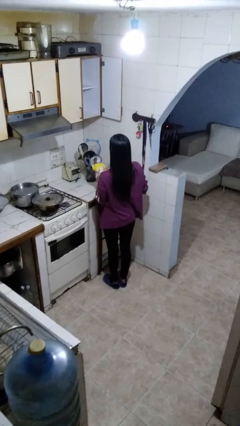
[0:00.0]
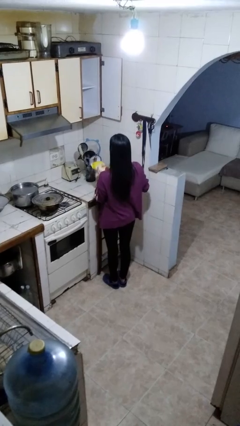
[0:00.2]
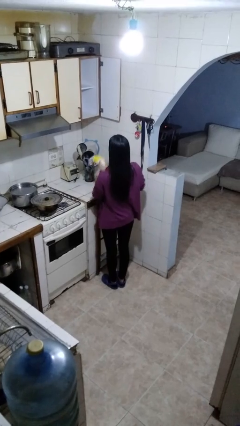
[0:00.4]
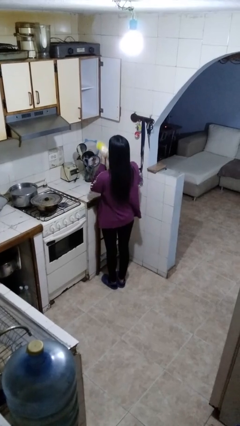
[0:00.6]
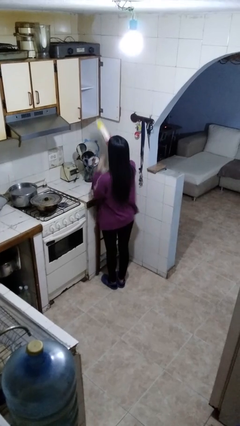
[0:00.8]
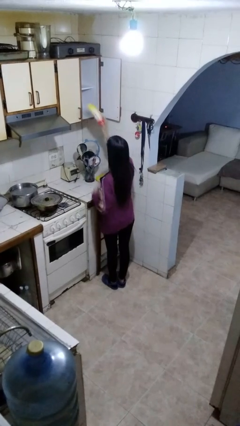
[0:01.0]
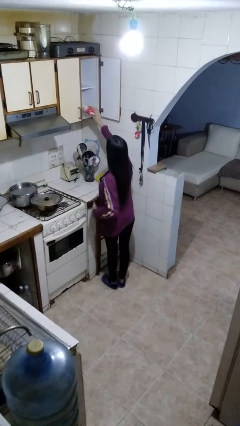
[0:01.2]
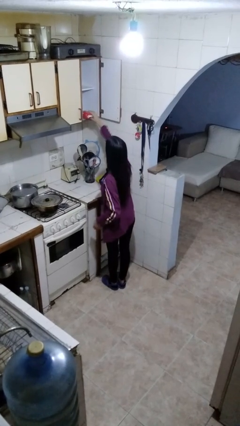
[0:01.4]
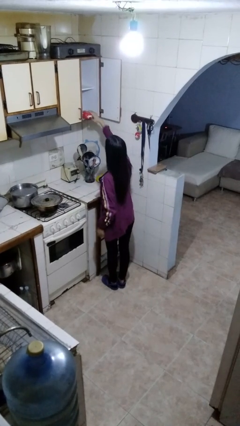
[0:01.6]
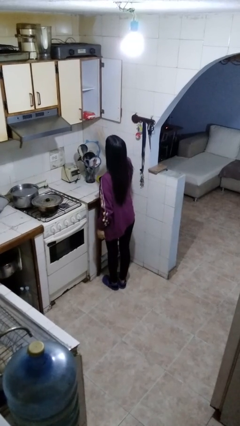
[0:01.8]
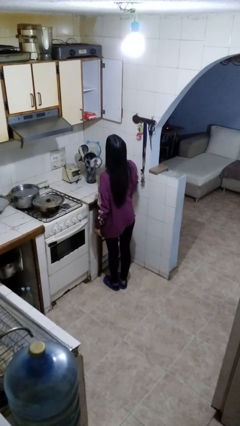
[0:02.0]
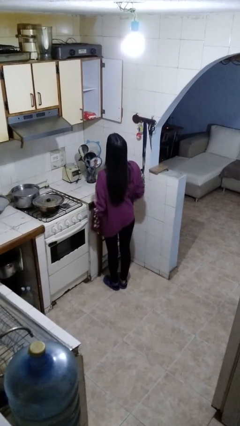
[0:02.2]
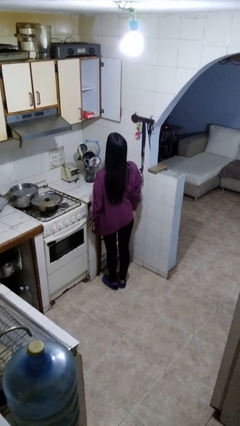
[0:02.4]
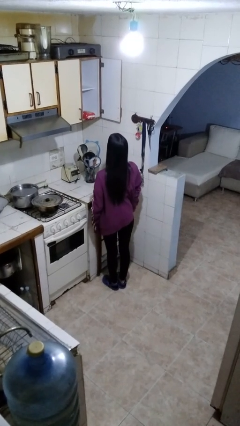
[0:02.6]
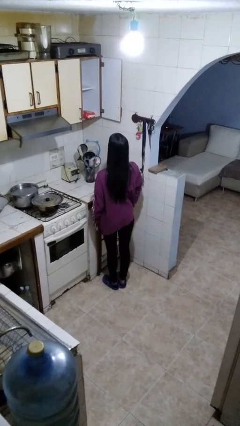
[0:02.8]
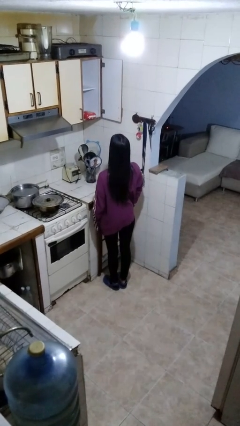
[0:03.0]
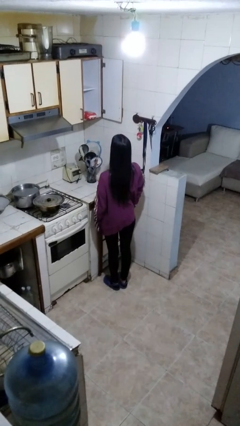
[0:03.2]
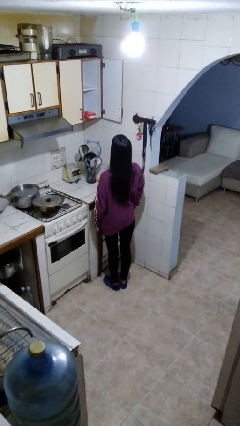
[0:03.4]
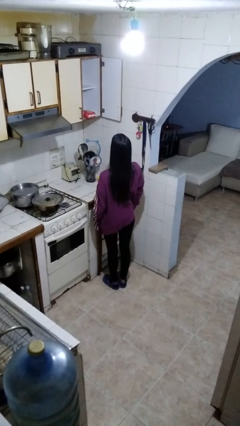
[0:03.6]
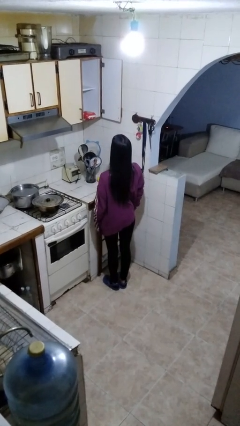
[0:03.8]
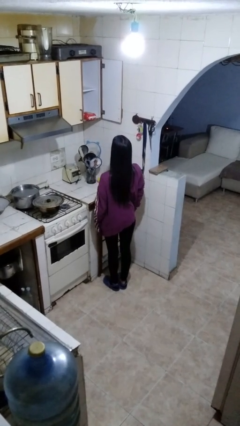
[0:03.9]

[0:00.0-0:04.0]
person picks up object from cabinet

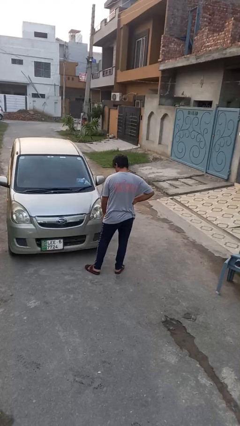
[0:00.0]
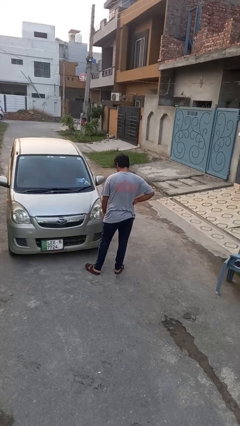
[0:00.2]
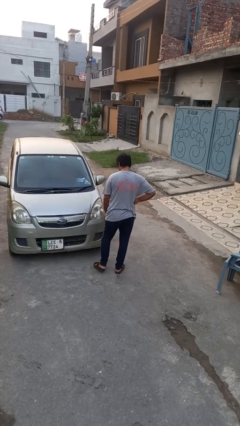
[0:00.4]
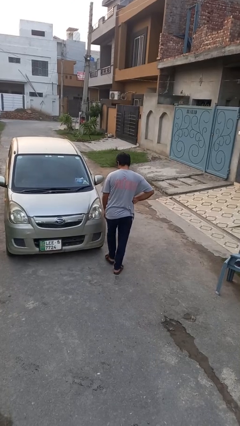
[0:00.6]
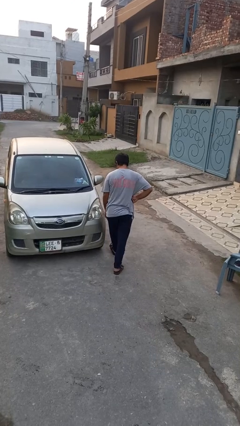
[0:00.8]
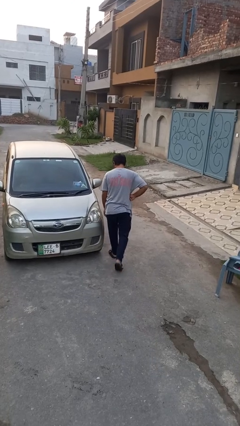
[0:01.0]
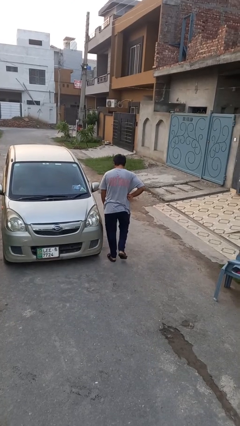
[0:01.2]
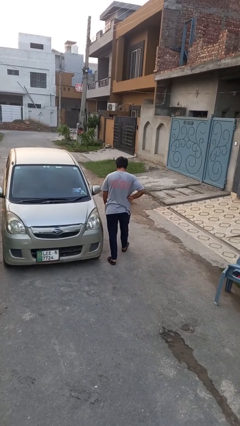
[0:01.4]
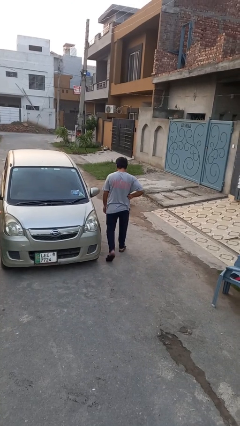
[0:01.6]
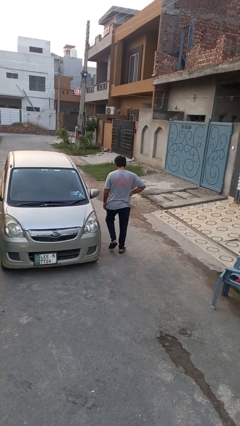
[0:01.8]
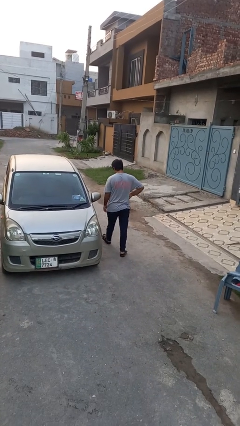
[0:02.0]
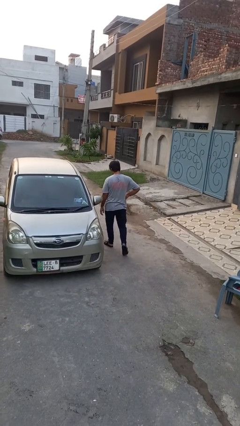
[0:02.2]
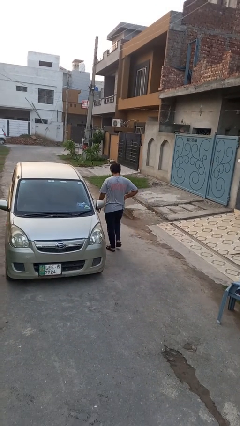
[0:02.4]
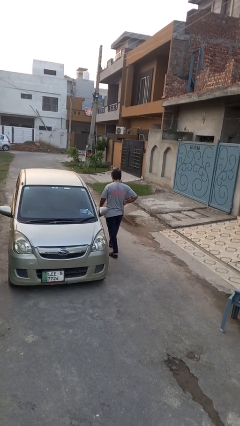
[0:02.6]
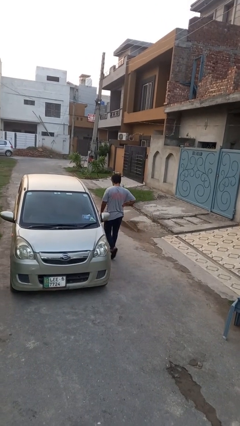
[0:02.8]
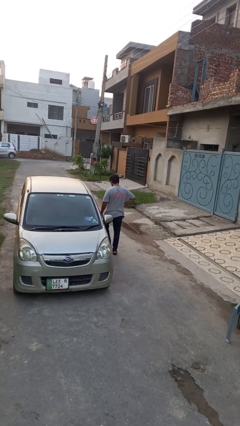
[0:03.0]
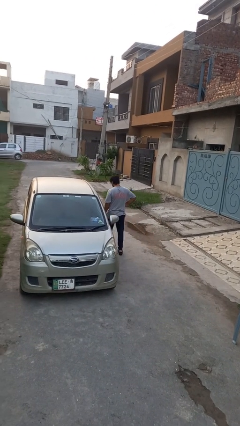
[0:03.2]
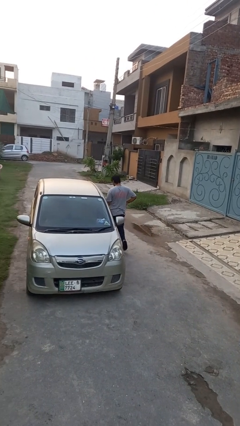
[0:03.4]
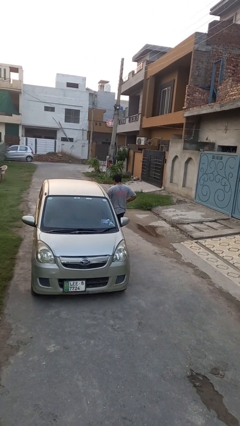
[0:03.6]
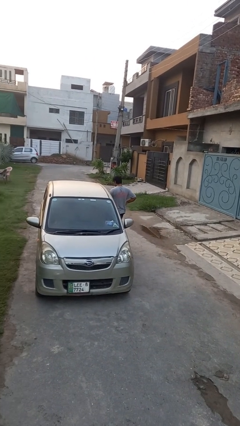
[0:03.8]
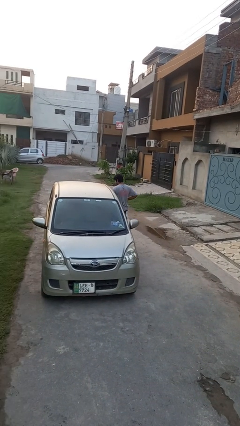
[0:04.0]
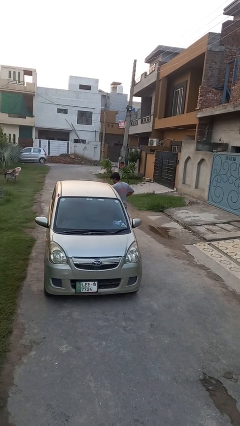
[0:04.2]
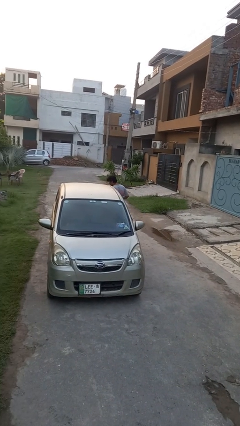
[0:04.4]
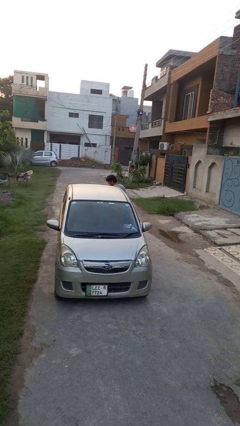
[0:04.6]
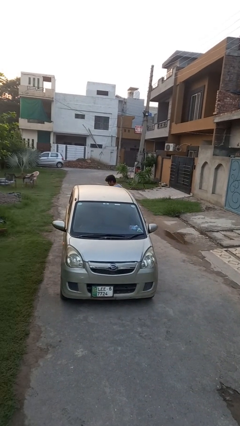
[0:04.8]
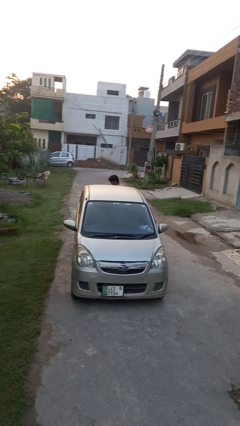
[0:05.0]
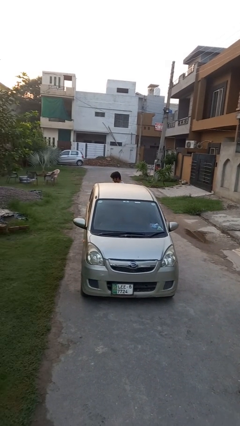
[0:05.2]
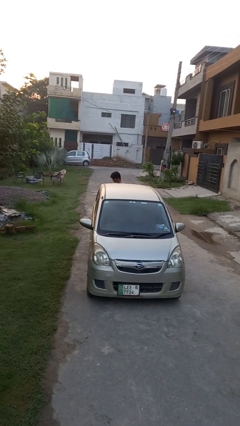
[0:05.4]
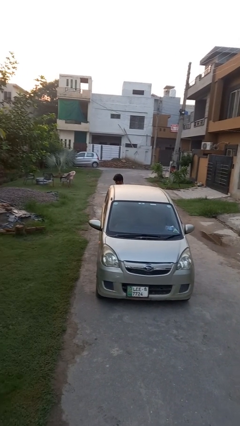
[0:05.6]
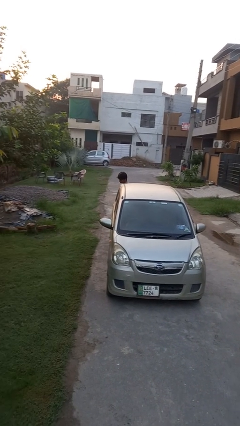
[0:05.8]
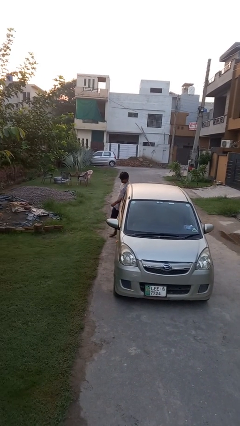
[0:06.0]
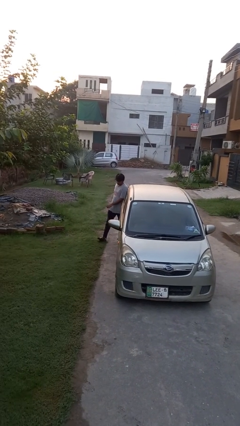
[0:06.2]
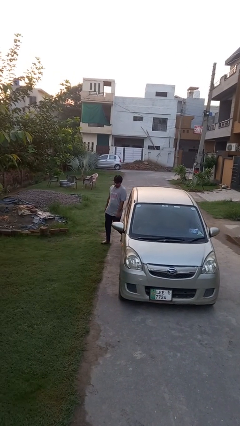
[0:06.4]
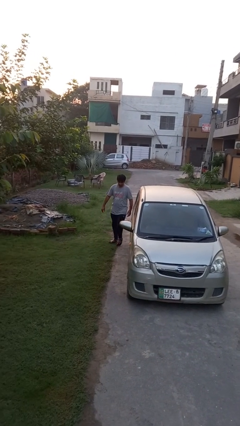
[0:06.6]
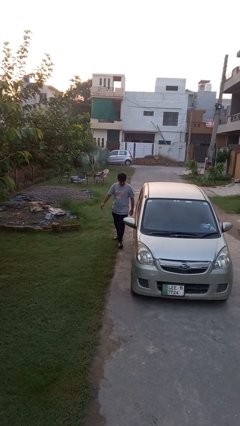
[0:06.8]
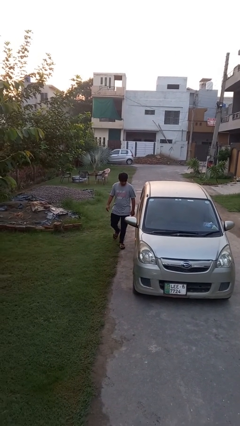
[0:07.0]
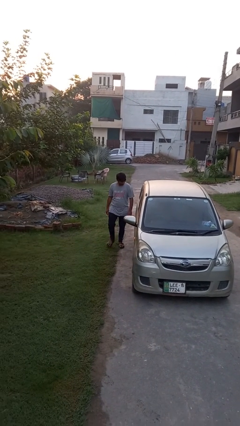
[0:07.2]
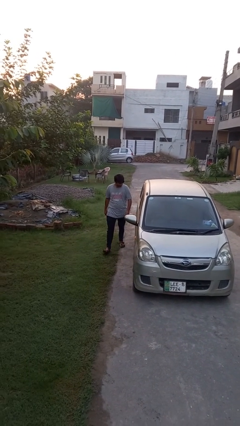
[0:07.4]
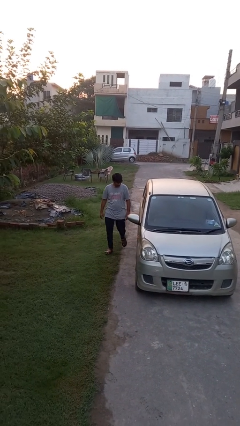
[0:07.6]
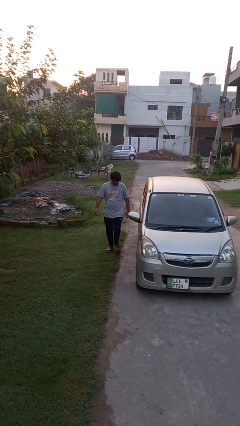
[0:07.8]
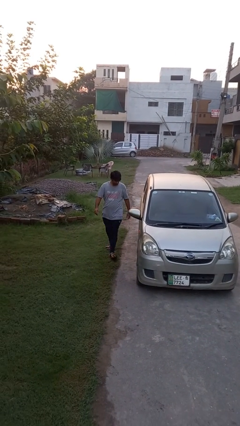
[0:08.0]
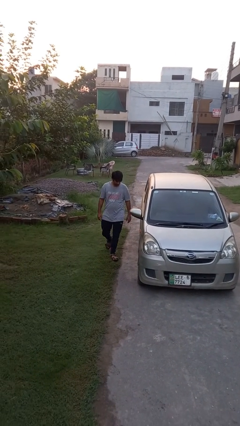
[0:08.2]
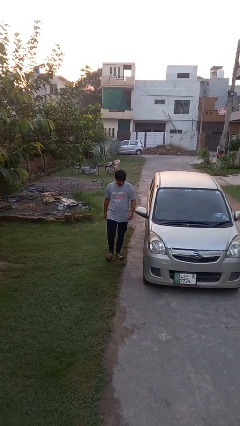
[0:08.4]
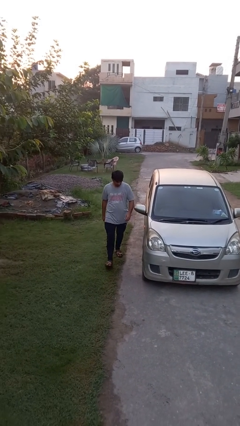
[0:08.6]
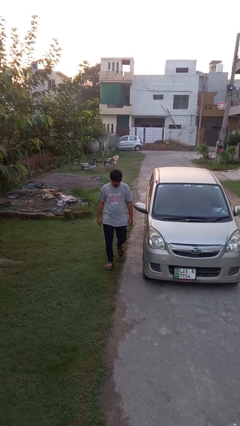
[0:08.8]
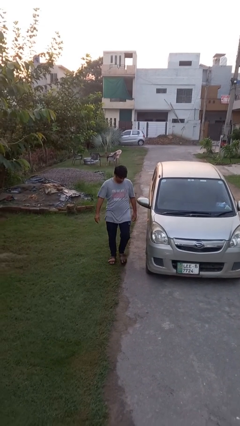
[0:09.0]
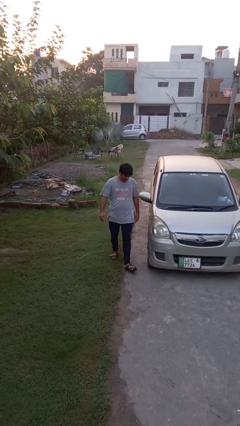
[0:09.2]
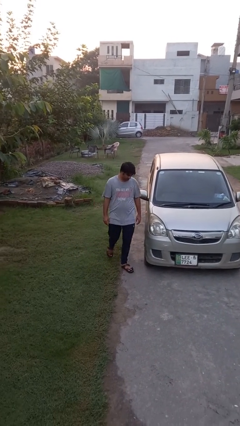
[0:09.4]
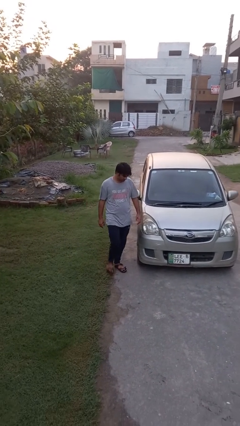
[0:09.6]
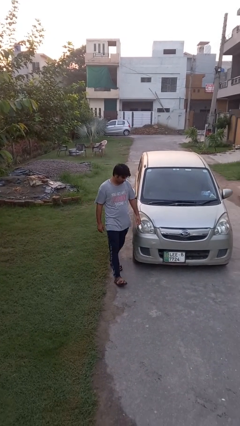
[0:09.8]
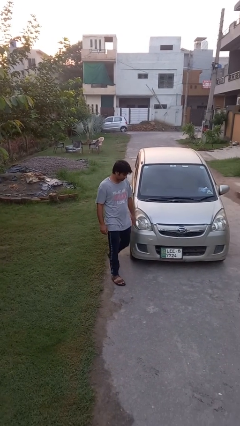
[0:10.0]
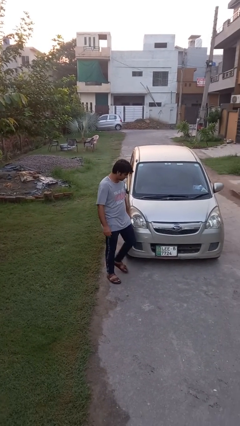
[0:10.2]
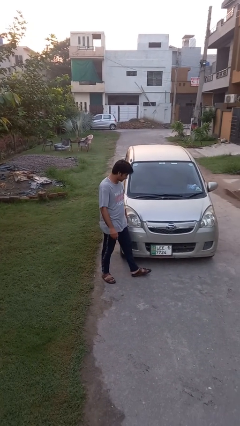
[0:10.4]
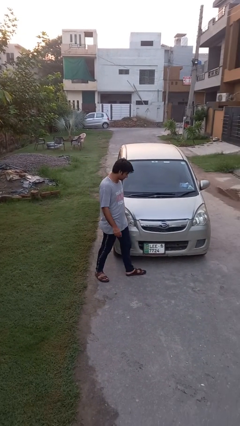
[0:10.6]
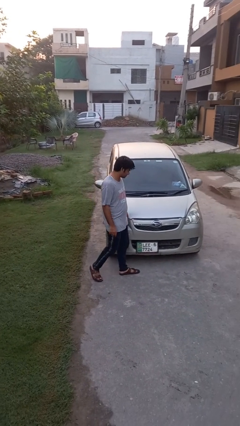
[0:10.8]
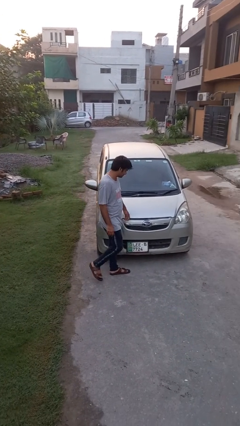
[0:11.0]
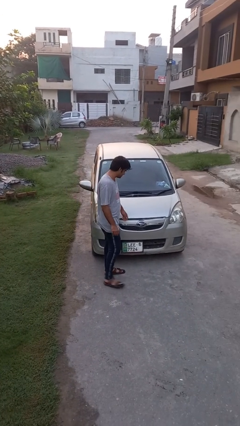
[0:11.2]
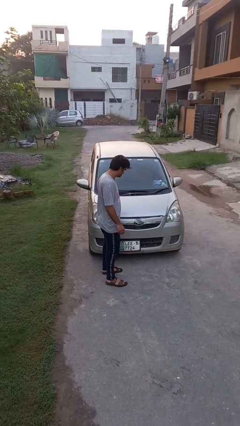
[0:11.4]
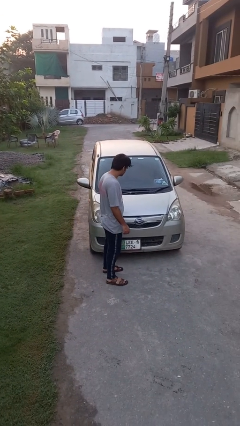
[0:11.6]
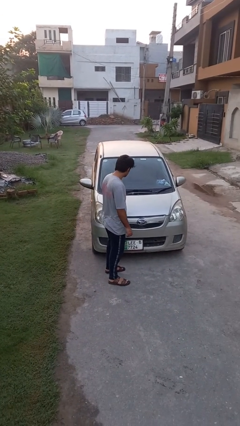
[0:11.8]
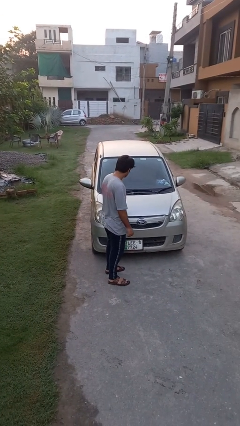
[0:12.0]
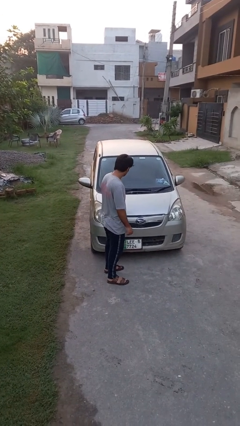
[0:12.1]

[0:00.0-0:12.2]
person walks around car

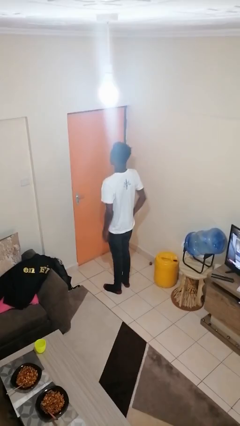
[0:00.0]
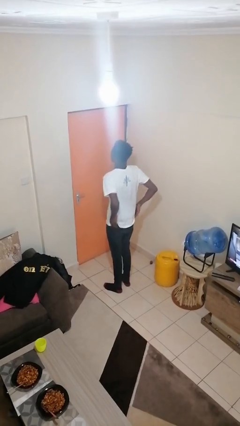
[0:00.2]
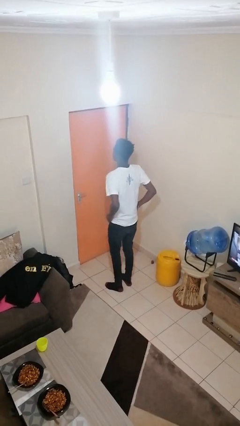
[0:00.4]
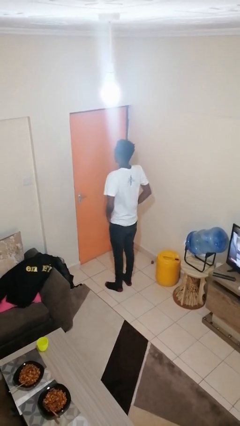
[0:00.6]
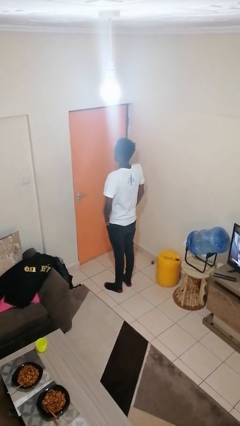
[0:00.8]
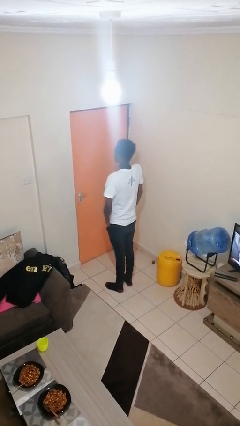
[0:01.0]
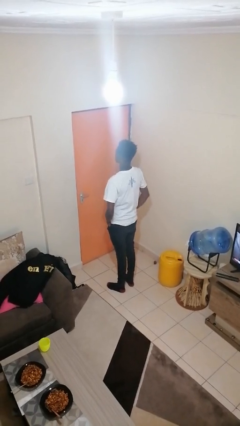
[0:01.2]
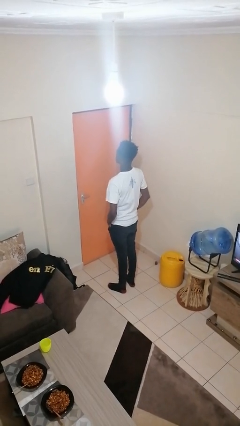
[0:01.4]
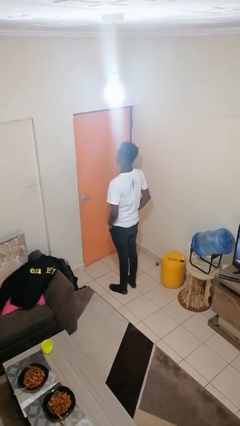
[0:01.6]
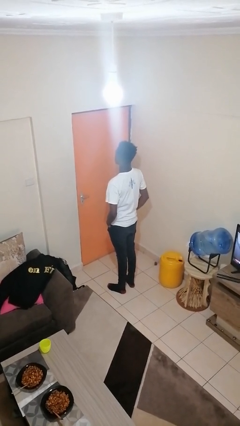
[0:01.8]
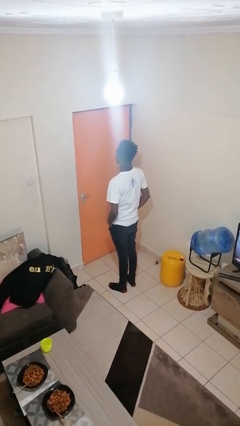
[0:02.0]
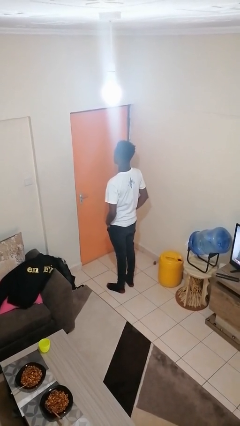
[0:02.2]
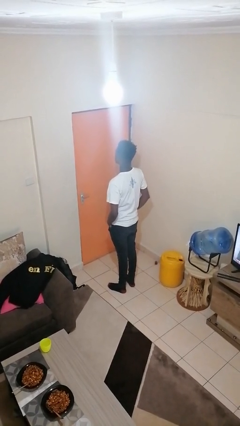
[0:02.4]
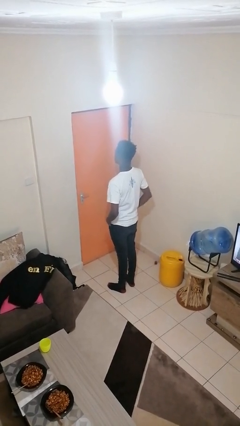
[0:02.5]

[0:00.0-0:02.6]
person puts hands in back pockets
